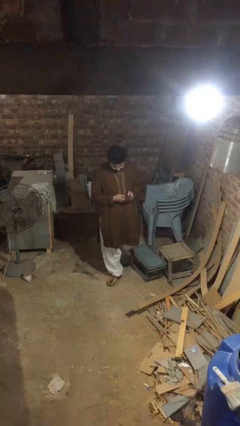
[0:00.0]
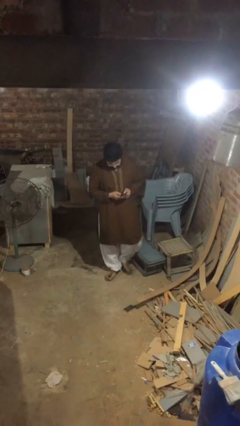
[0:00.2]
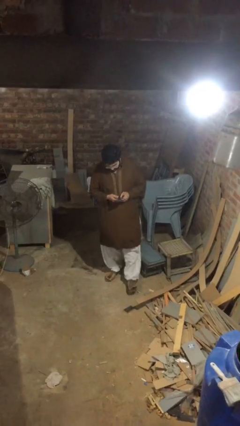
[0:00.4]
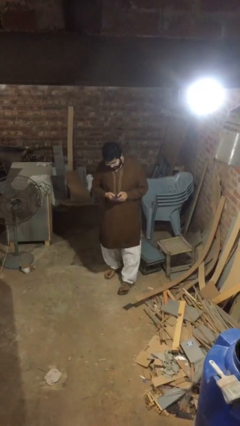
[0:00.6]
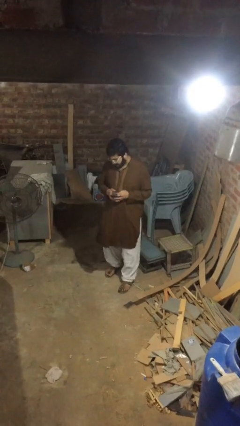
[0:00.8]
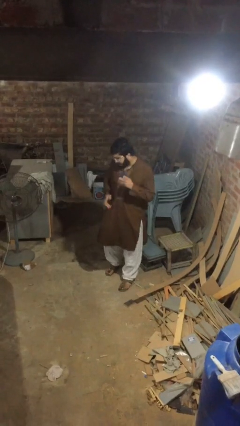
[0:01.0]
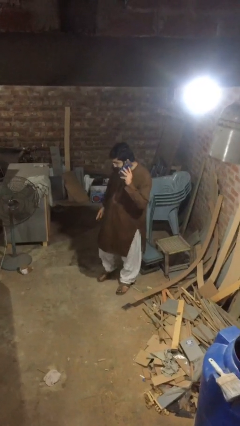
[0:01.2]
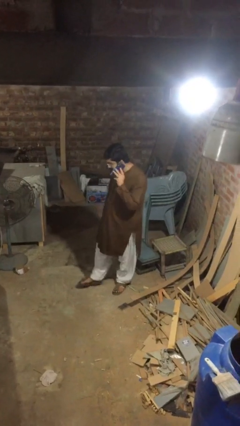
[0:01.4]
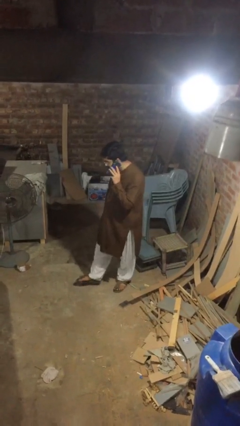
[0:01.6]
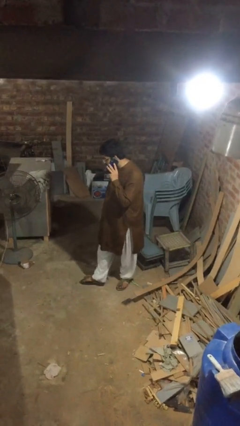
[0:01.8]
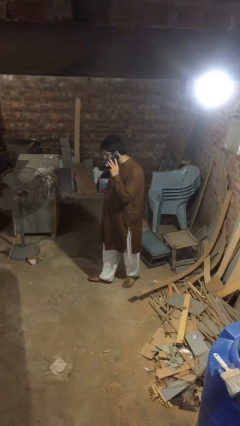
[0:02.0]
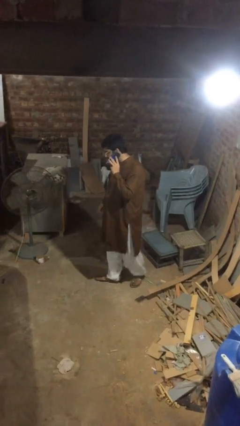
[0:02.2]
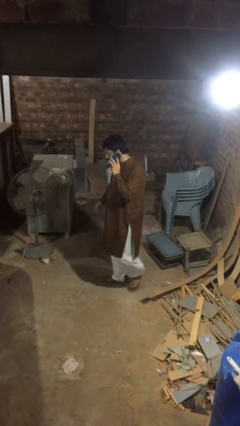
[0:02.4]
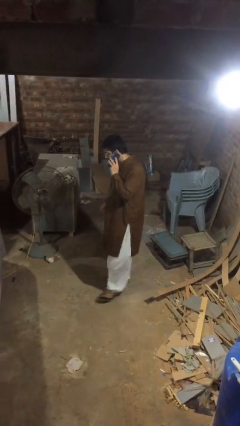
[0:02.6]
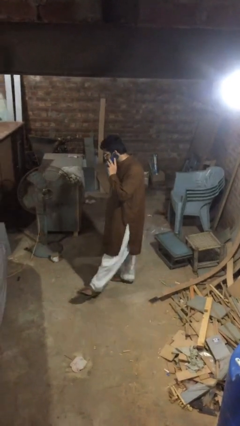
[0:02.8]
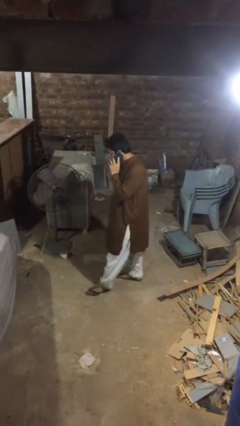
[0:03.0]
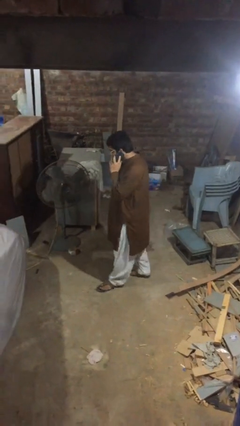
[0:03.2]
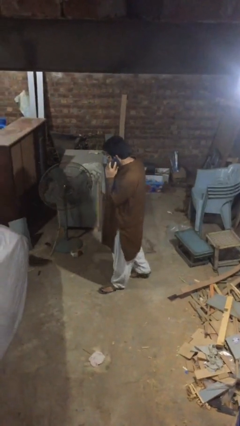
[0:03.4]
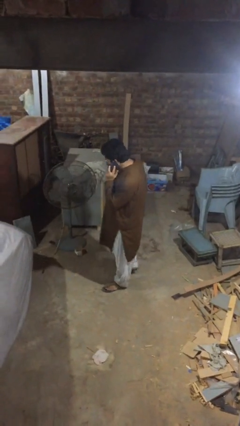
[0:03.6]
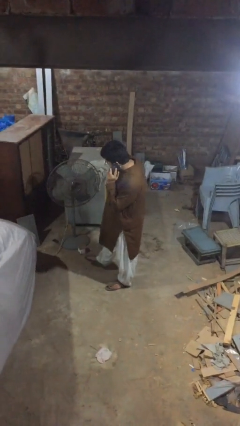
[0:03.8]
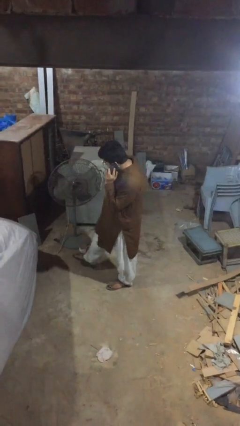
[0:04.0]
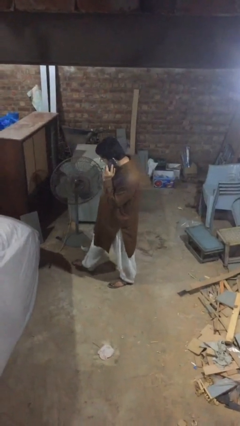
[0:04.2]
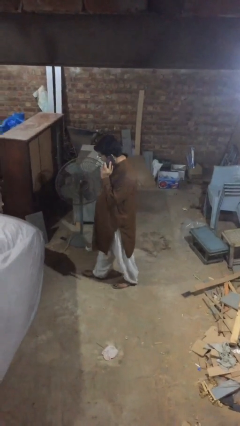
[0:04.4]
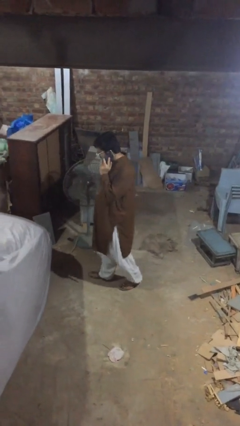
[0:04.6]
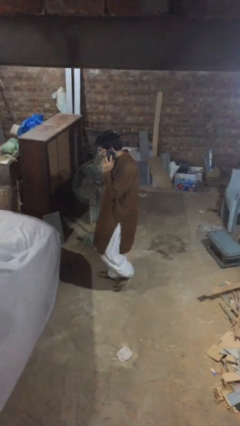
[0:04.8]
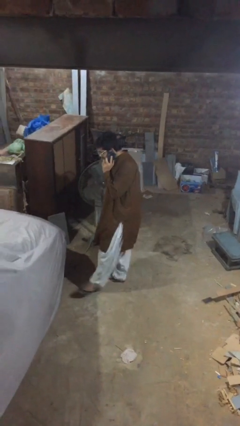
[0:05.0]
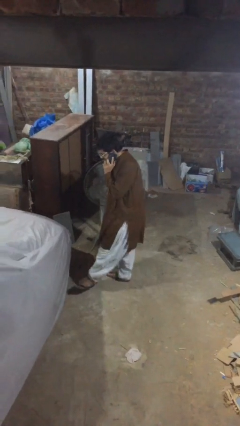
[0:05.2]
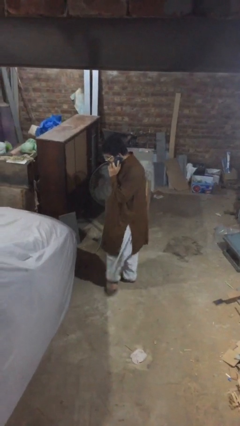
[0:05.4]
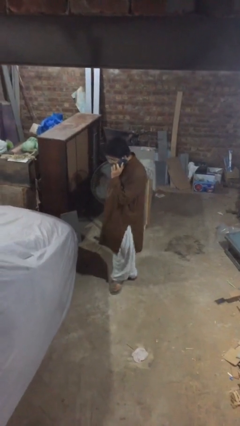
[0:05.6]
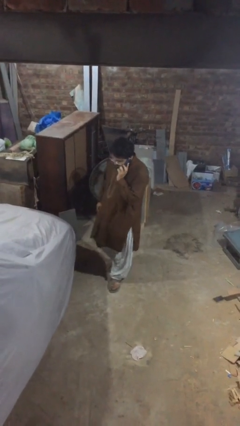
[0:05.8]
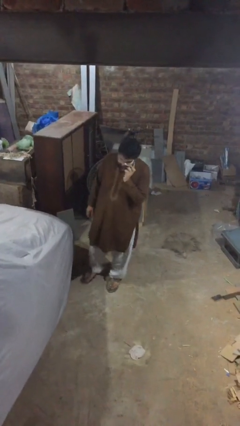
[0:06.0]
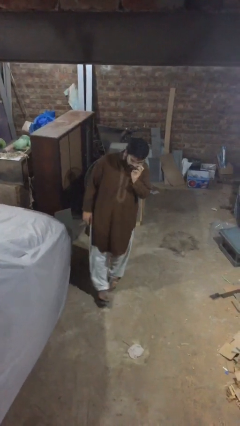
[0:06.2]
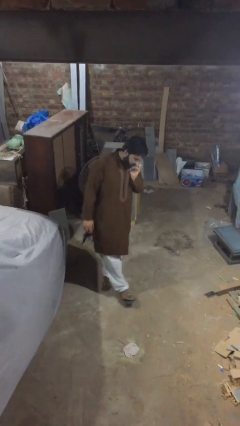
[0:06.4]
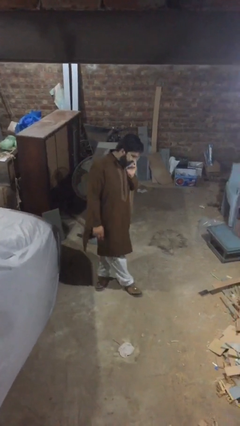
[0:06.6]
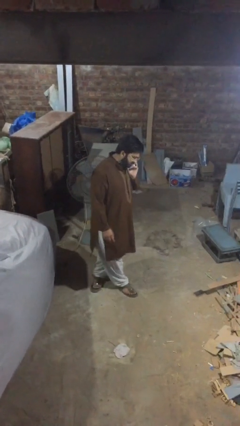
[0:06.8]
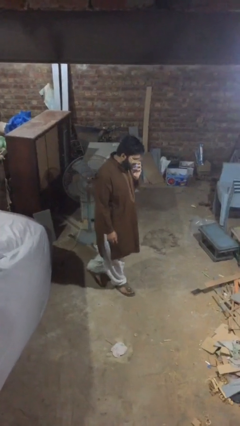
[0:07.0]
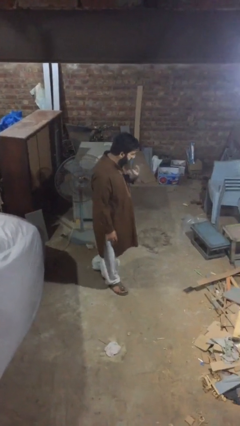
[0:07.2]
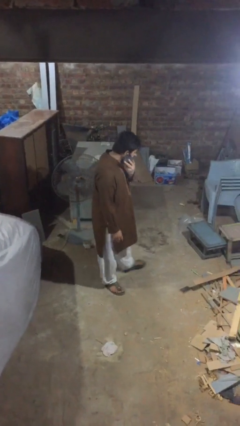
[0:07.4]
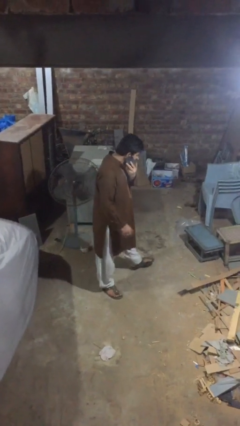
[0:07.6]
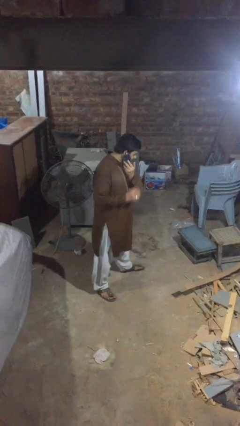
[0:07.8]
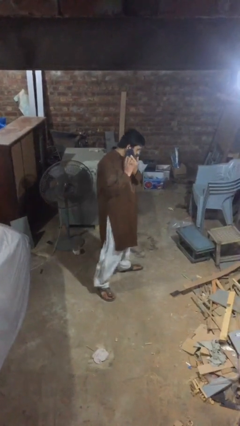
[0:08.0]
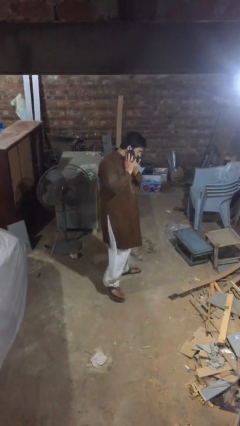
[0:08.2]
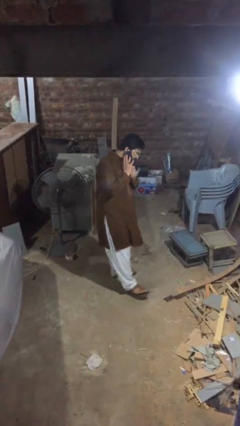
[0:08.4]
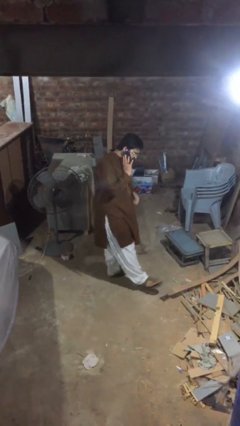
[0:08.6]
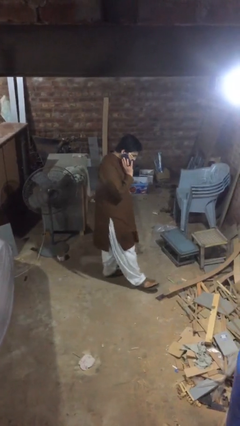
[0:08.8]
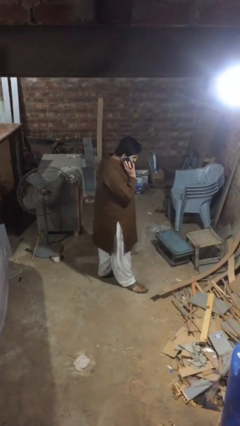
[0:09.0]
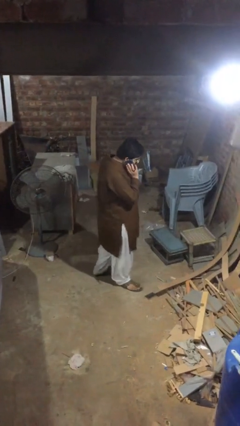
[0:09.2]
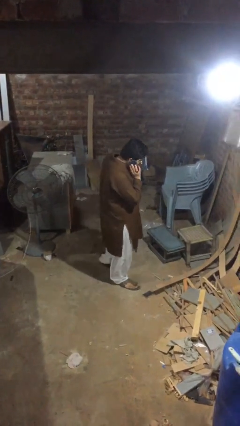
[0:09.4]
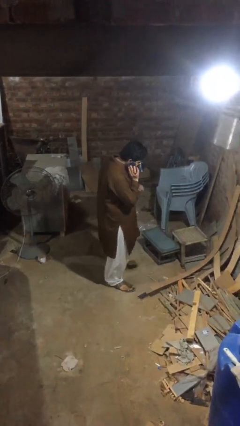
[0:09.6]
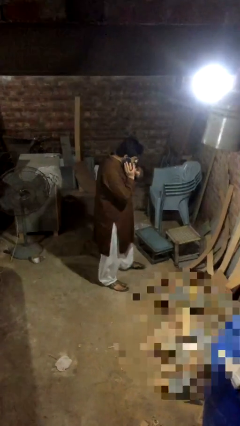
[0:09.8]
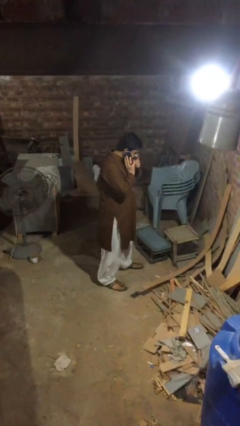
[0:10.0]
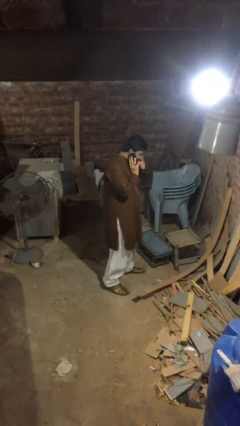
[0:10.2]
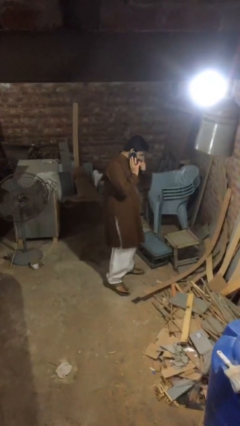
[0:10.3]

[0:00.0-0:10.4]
person talks on phone

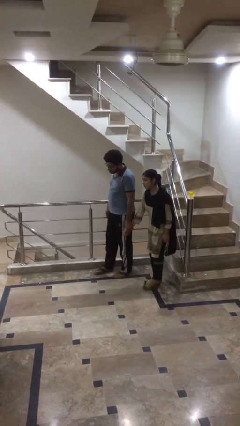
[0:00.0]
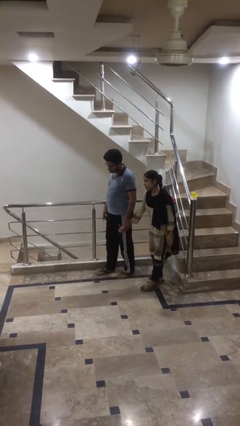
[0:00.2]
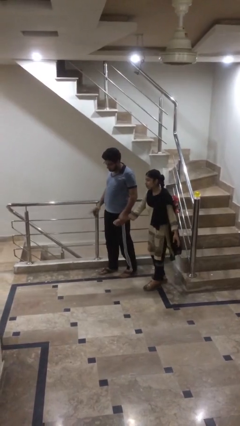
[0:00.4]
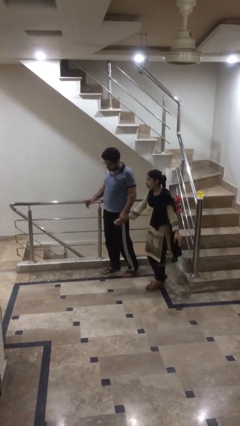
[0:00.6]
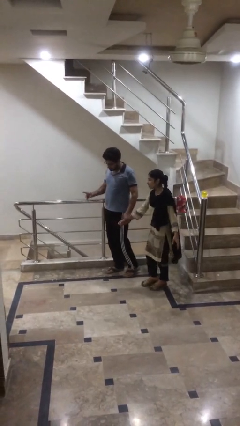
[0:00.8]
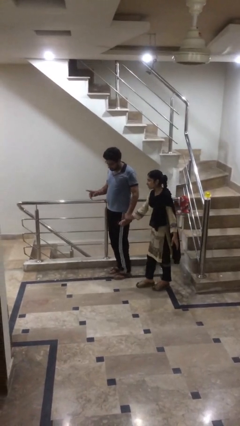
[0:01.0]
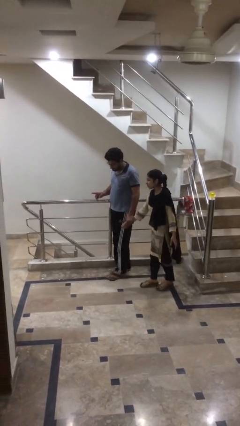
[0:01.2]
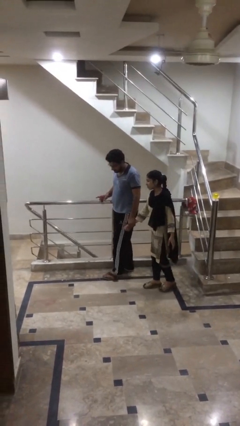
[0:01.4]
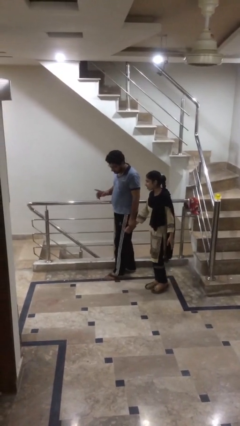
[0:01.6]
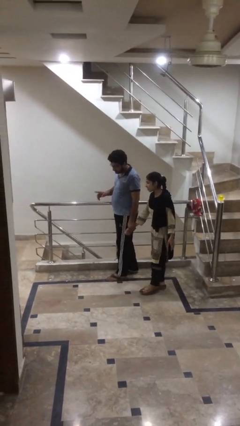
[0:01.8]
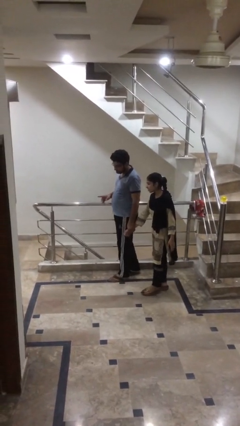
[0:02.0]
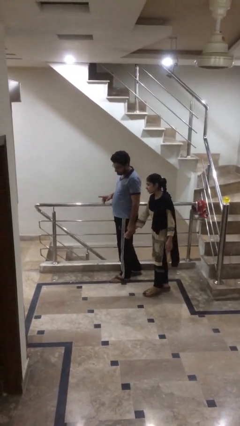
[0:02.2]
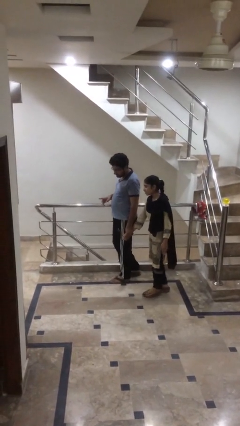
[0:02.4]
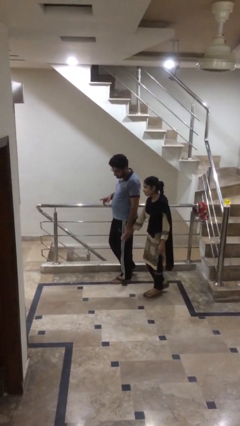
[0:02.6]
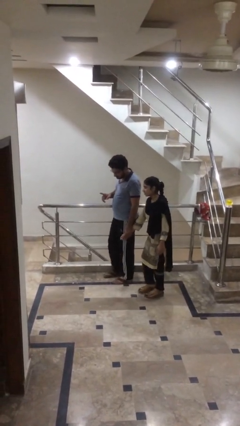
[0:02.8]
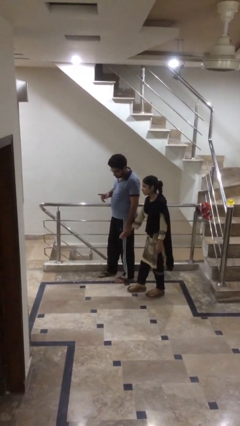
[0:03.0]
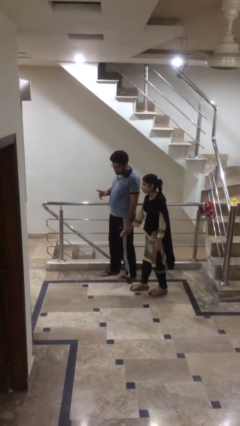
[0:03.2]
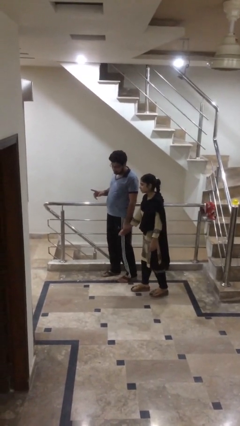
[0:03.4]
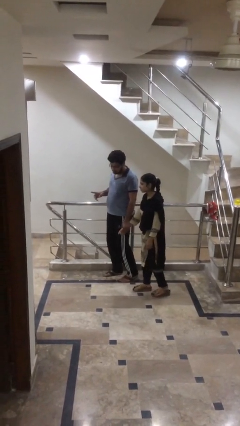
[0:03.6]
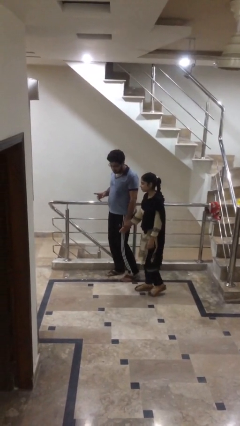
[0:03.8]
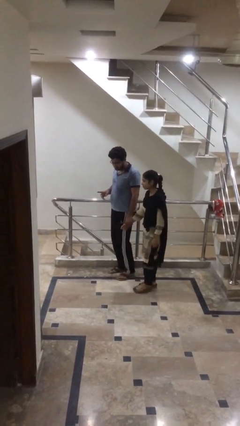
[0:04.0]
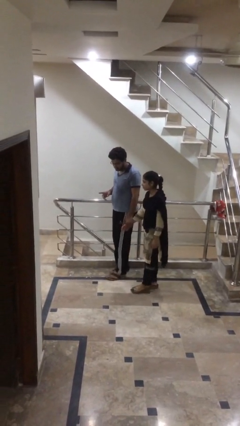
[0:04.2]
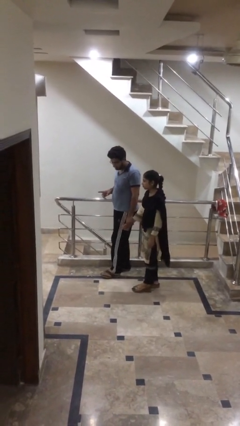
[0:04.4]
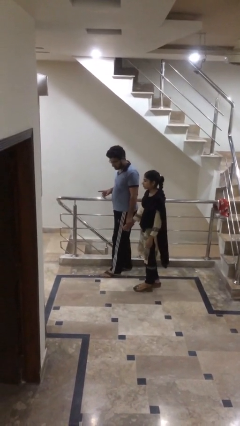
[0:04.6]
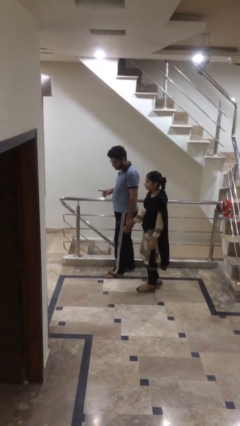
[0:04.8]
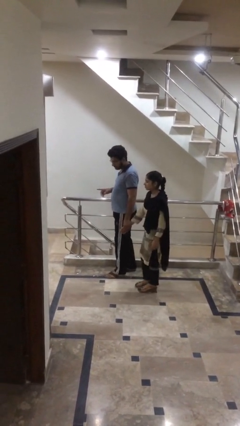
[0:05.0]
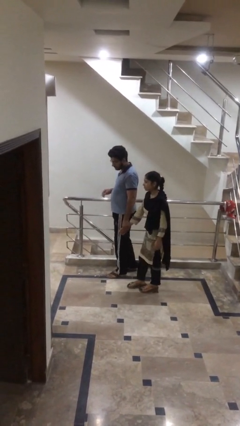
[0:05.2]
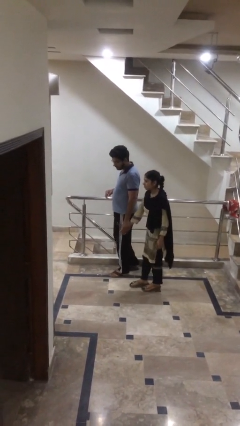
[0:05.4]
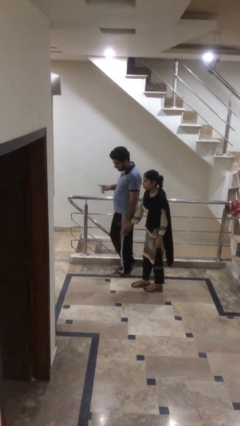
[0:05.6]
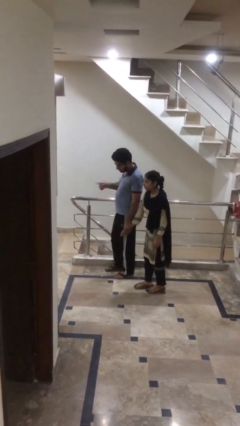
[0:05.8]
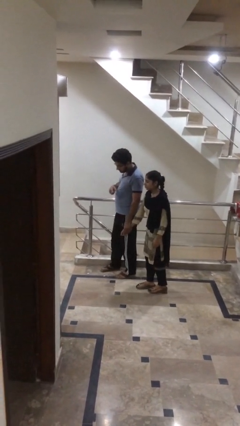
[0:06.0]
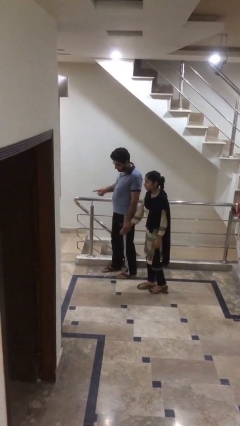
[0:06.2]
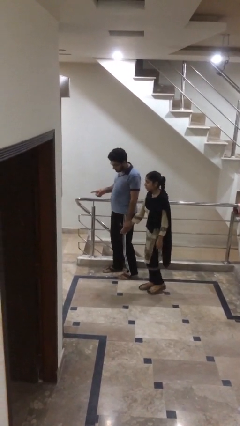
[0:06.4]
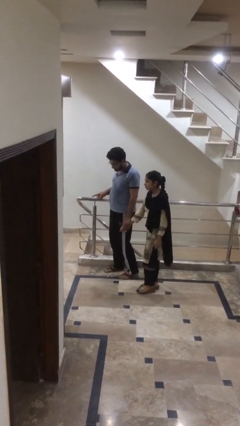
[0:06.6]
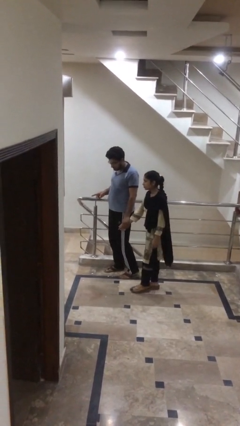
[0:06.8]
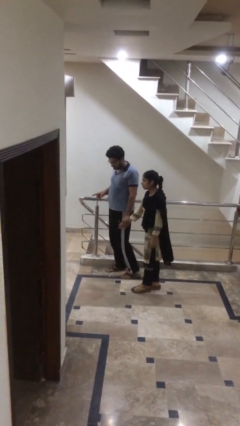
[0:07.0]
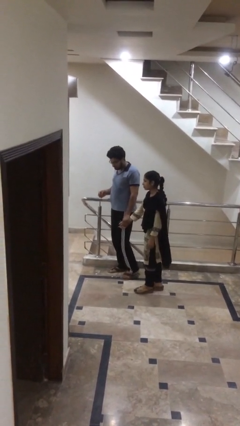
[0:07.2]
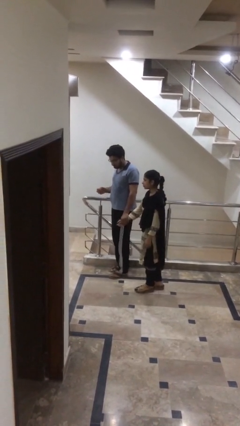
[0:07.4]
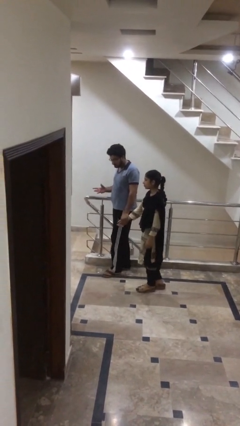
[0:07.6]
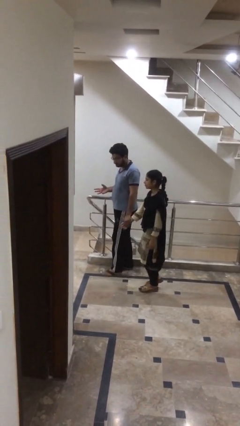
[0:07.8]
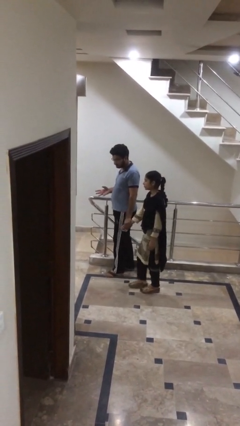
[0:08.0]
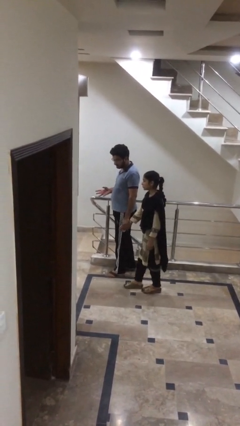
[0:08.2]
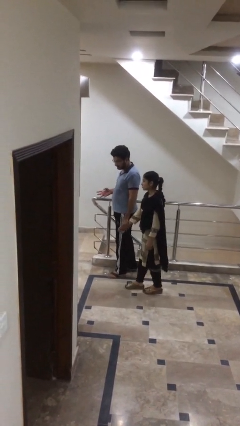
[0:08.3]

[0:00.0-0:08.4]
person holds hand
